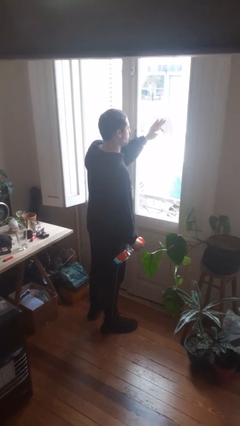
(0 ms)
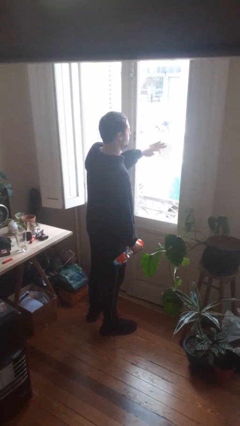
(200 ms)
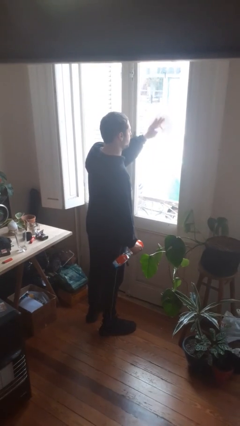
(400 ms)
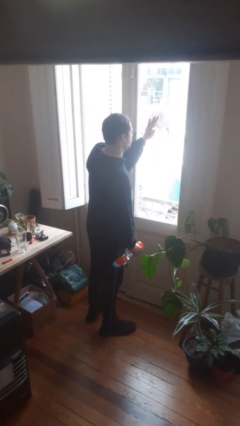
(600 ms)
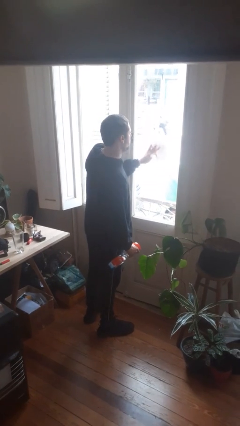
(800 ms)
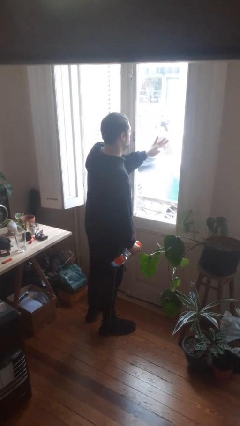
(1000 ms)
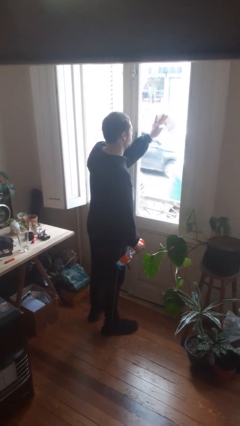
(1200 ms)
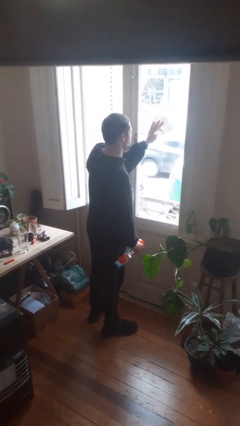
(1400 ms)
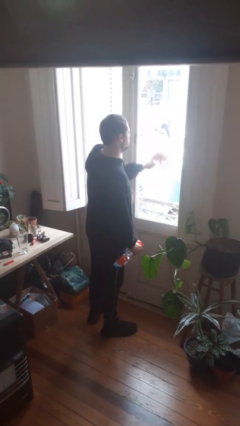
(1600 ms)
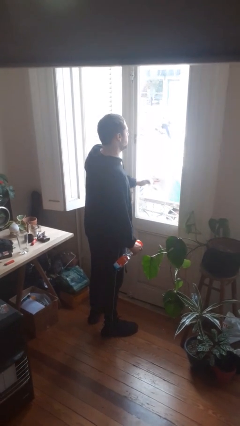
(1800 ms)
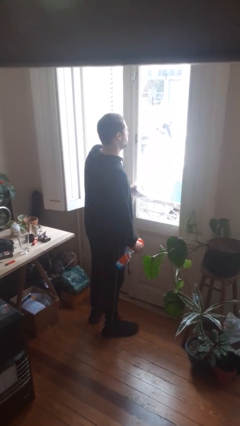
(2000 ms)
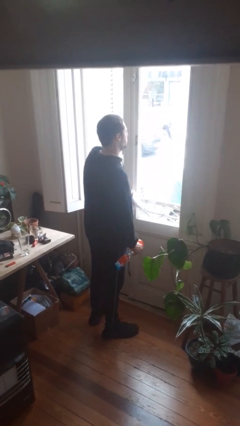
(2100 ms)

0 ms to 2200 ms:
person washes window

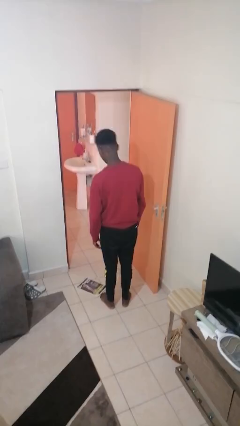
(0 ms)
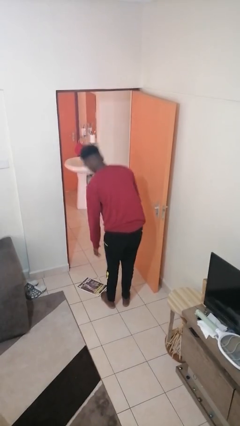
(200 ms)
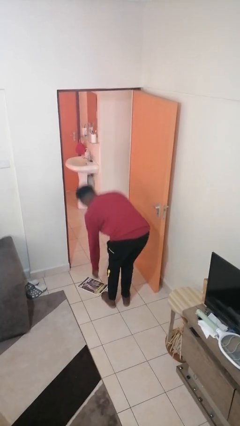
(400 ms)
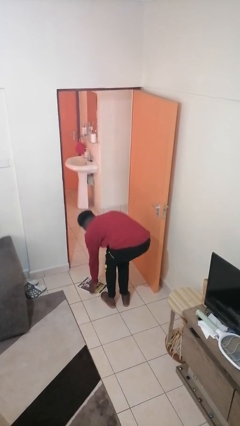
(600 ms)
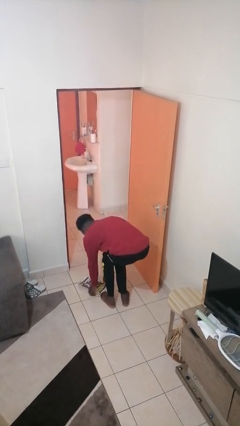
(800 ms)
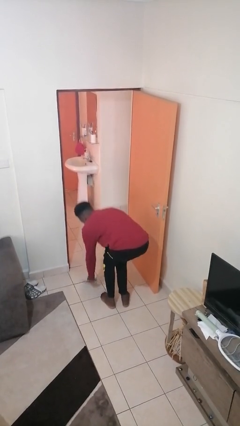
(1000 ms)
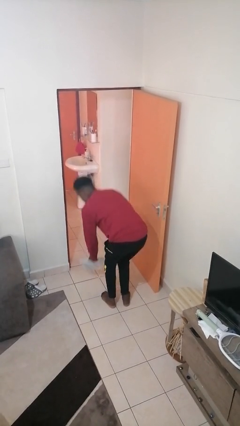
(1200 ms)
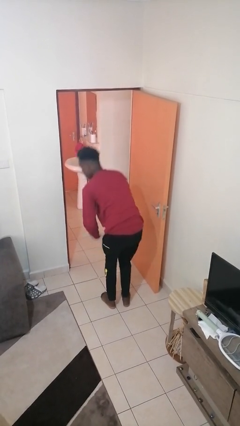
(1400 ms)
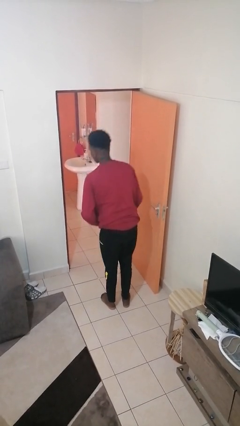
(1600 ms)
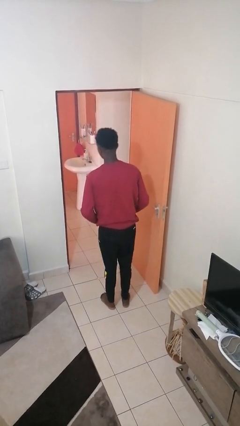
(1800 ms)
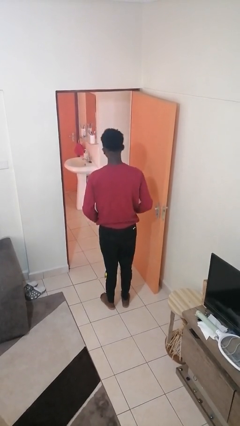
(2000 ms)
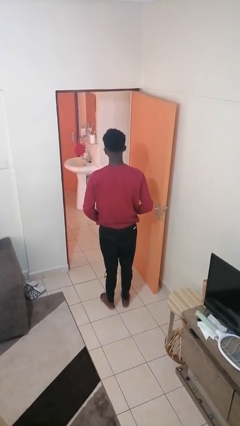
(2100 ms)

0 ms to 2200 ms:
person picks up object from floor

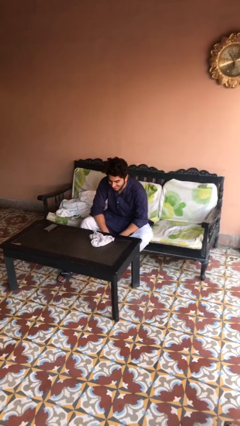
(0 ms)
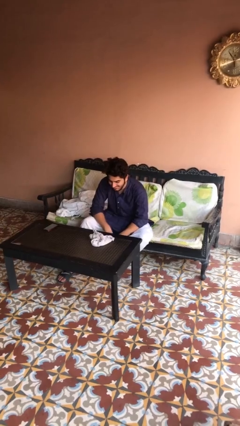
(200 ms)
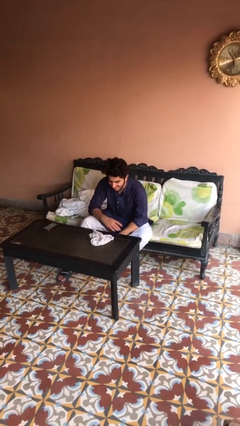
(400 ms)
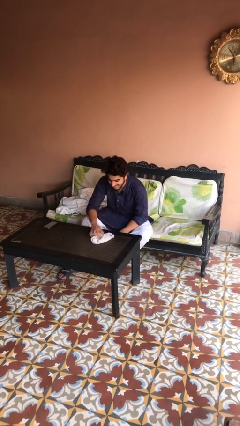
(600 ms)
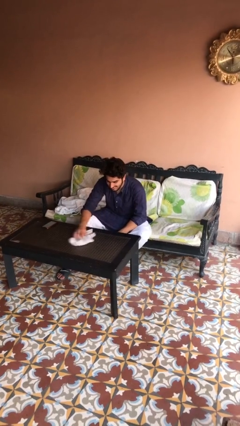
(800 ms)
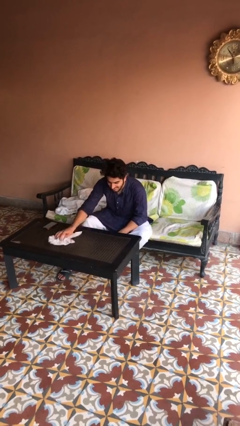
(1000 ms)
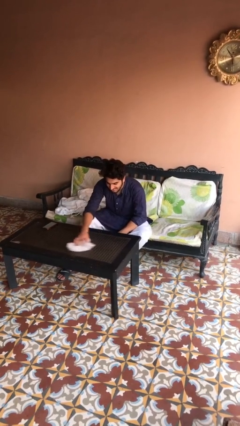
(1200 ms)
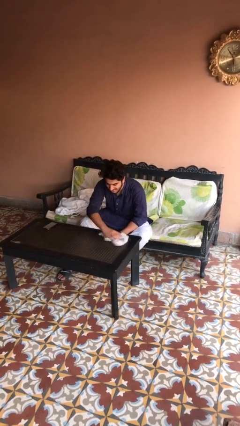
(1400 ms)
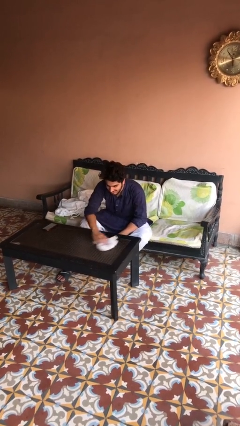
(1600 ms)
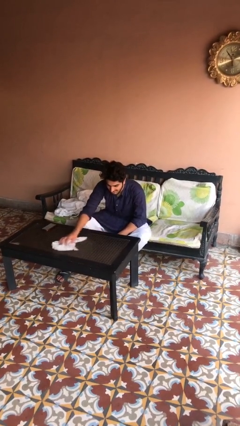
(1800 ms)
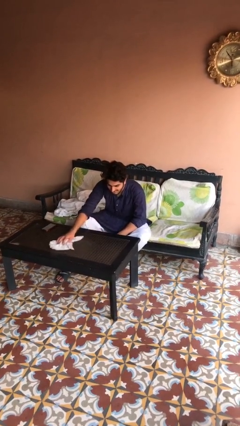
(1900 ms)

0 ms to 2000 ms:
person cleans table with rag

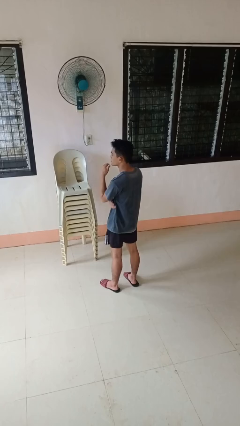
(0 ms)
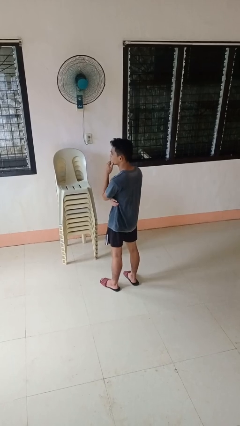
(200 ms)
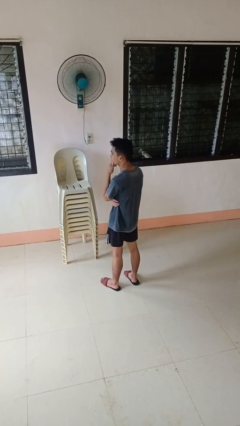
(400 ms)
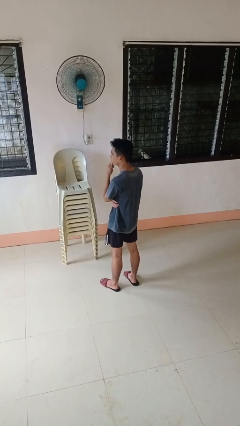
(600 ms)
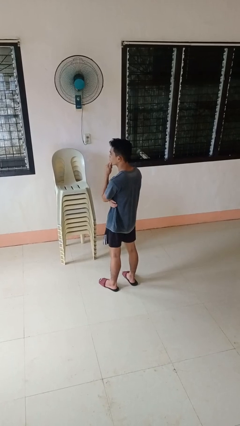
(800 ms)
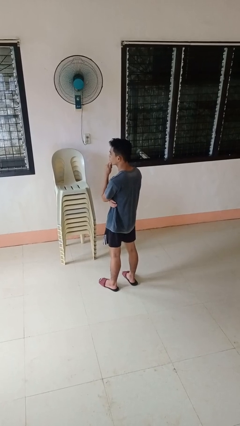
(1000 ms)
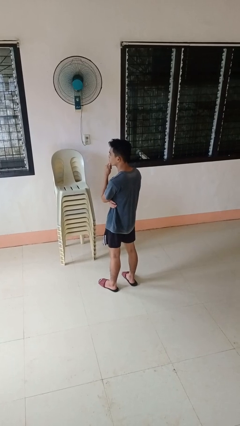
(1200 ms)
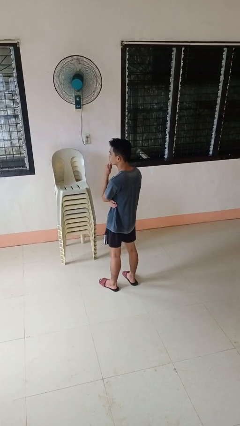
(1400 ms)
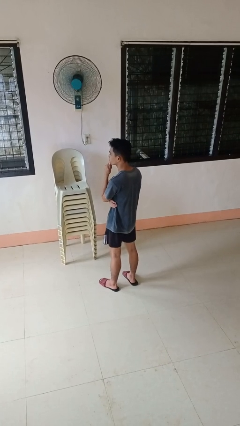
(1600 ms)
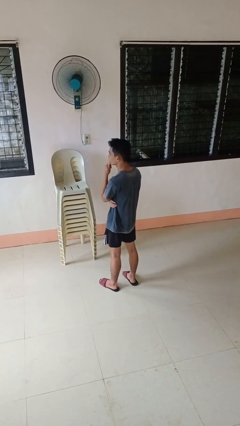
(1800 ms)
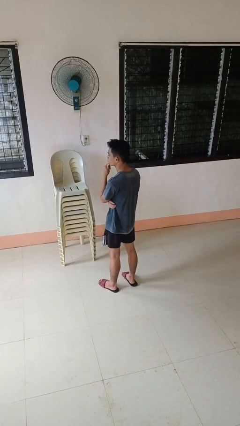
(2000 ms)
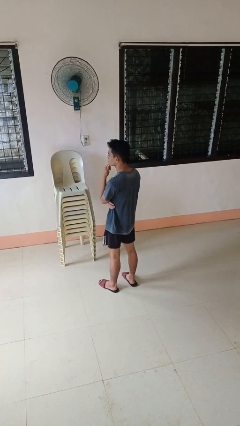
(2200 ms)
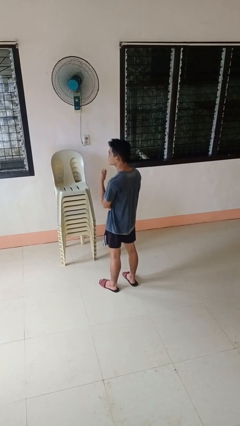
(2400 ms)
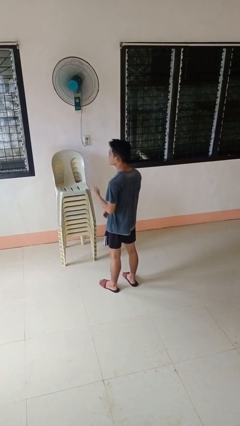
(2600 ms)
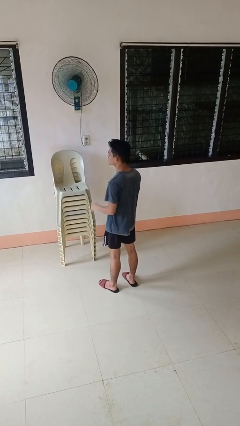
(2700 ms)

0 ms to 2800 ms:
person strokes chin

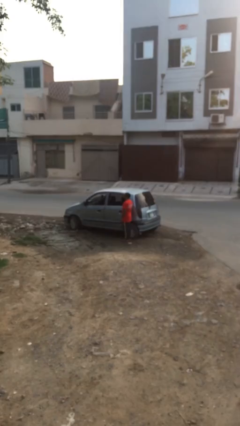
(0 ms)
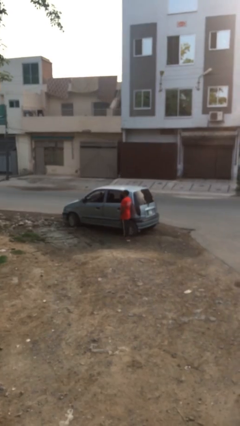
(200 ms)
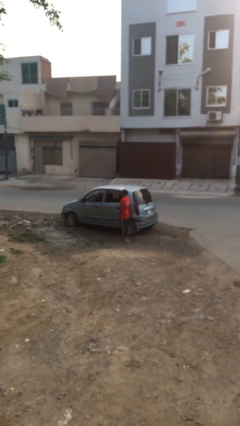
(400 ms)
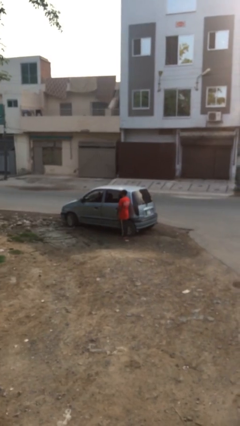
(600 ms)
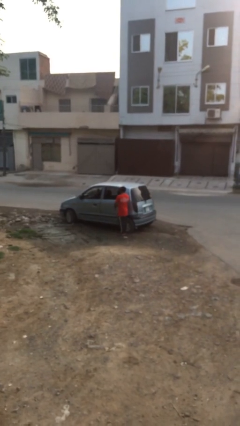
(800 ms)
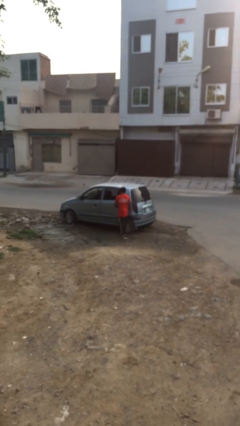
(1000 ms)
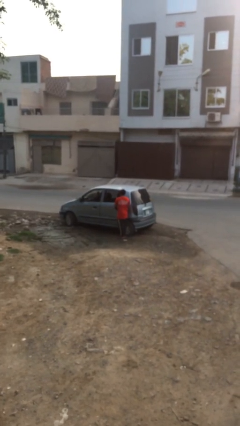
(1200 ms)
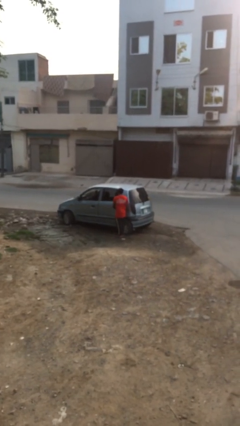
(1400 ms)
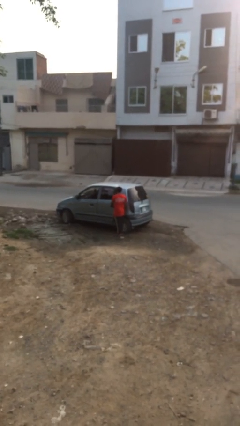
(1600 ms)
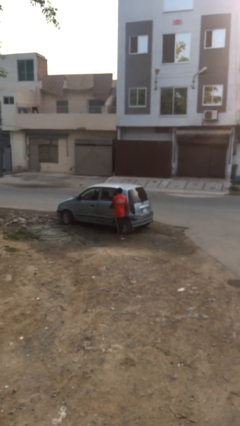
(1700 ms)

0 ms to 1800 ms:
person opens car door

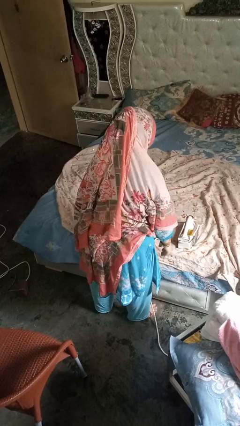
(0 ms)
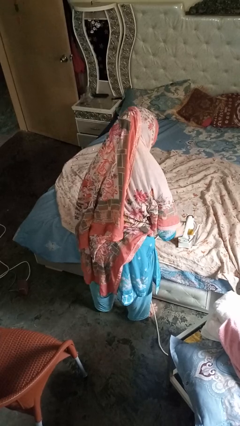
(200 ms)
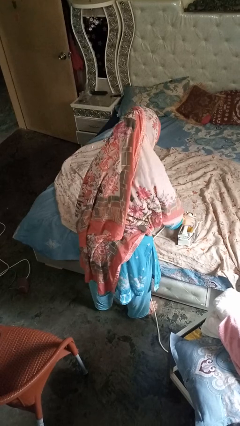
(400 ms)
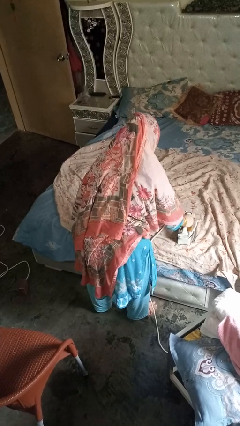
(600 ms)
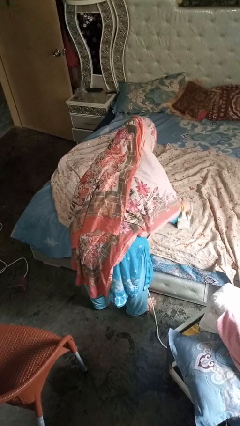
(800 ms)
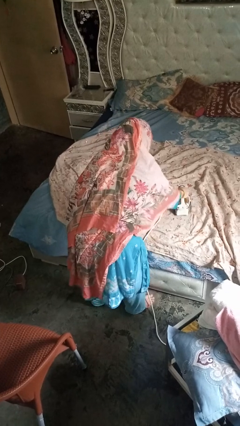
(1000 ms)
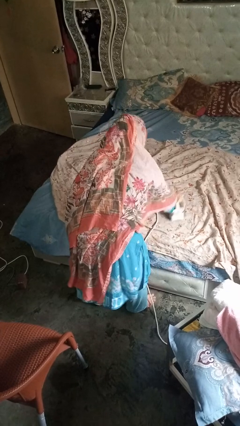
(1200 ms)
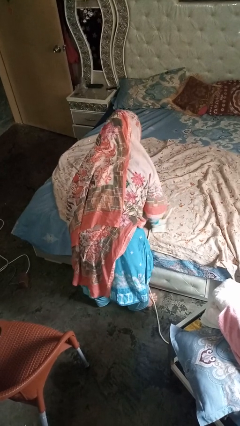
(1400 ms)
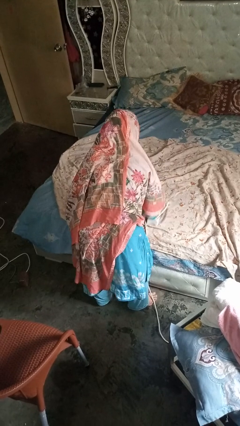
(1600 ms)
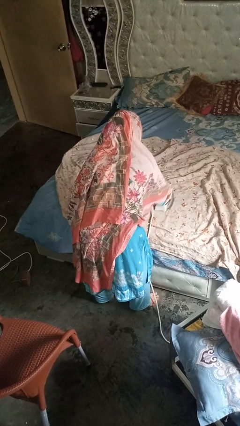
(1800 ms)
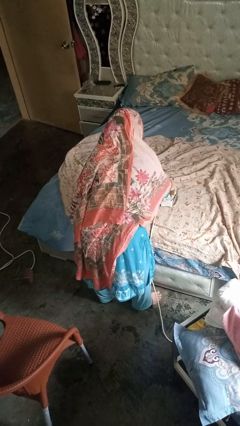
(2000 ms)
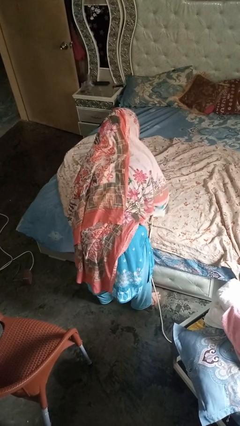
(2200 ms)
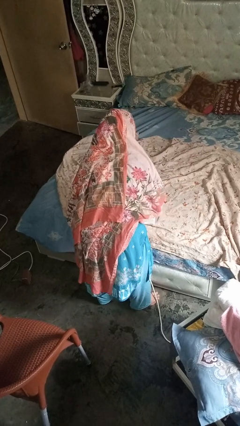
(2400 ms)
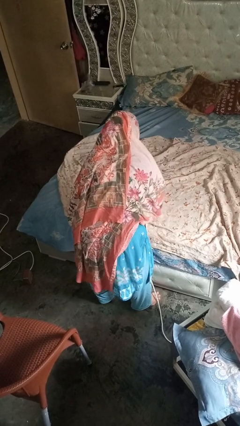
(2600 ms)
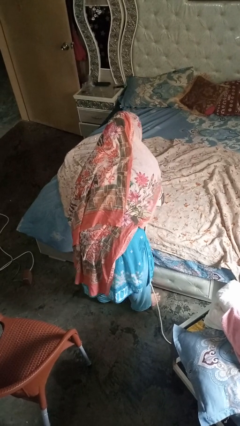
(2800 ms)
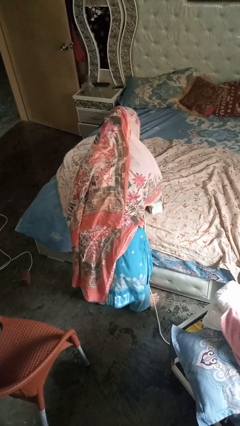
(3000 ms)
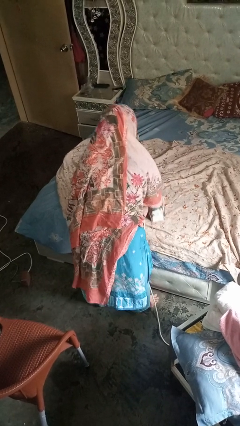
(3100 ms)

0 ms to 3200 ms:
person irons clothes

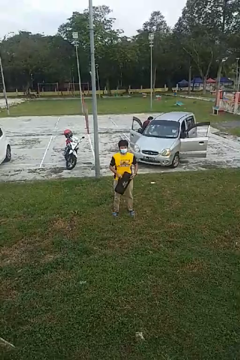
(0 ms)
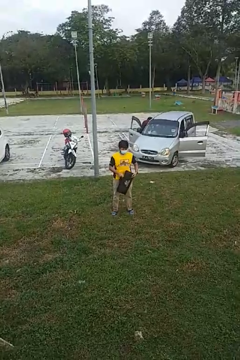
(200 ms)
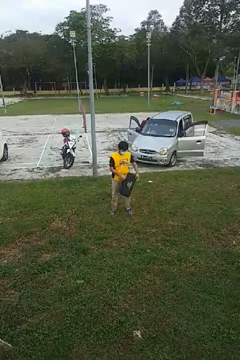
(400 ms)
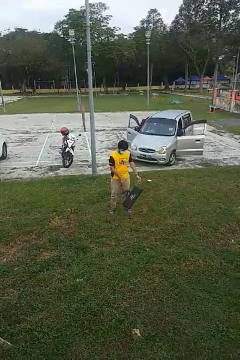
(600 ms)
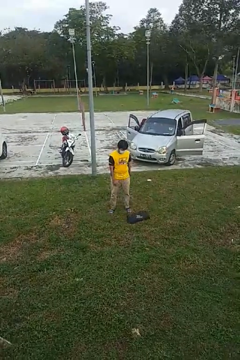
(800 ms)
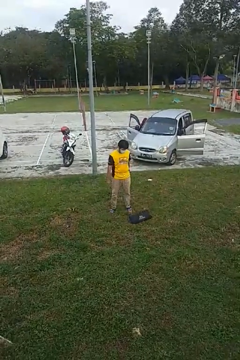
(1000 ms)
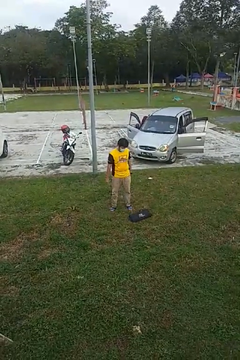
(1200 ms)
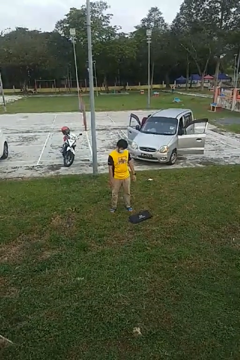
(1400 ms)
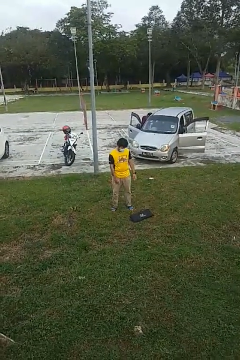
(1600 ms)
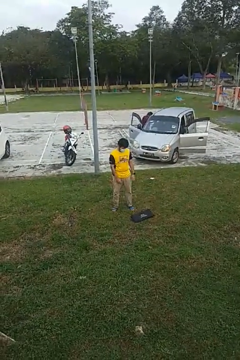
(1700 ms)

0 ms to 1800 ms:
person drops object

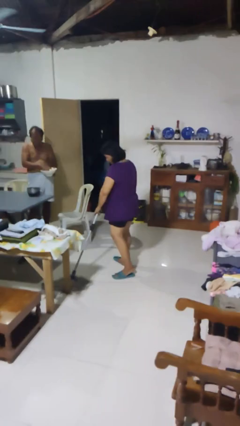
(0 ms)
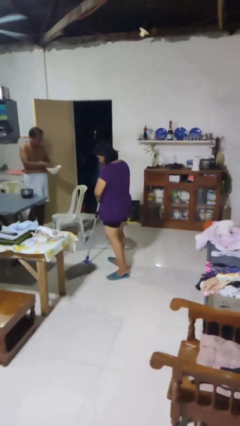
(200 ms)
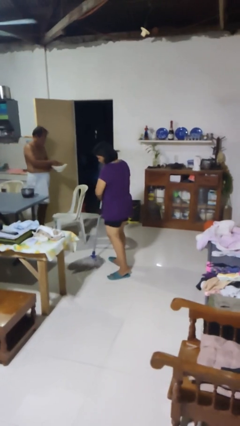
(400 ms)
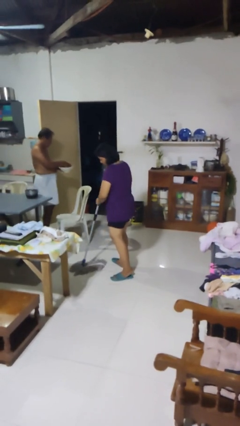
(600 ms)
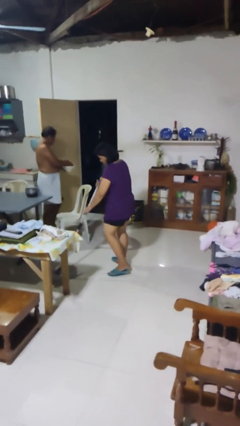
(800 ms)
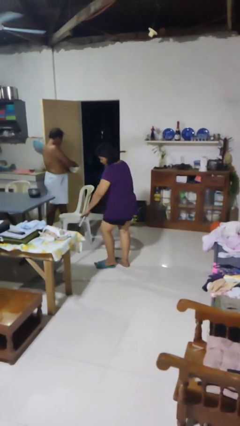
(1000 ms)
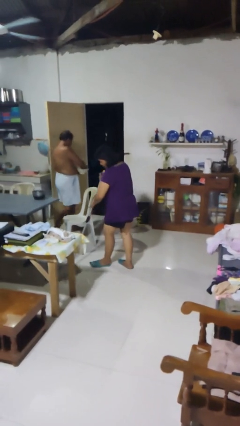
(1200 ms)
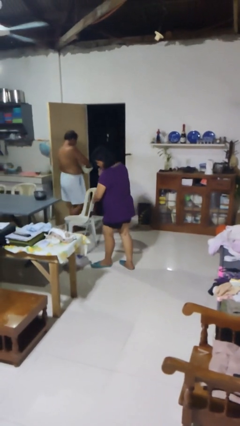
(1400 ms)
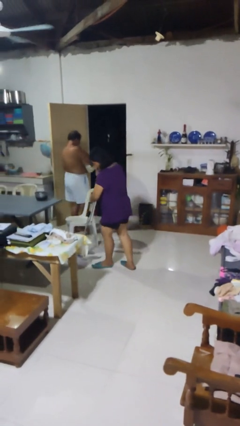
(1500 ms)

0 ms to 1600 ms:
person mops
